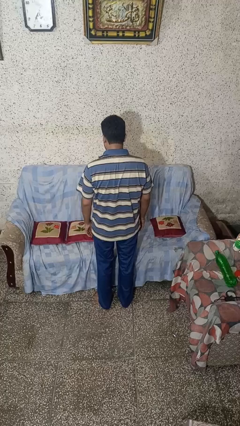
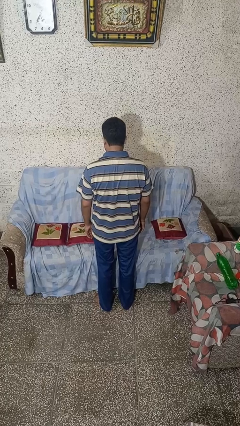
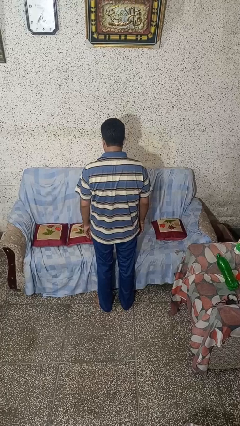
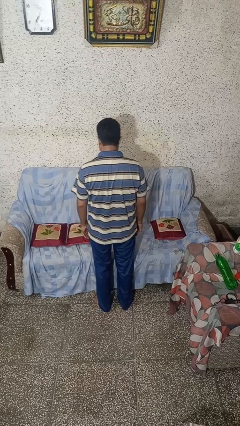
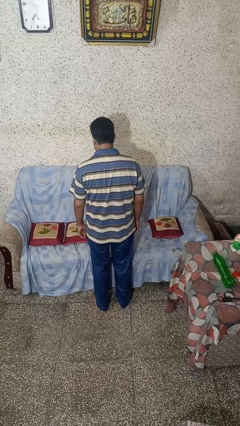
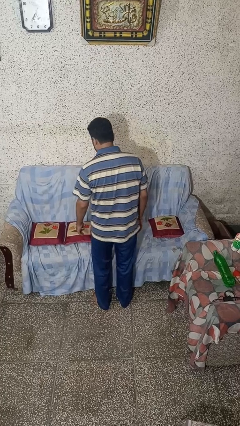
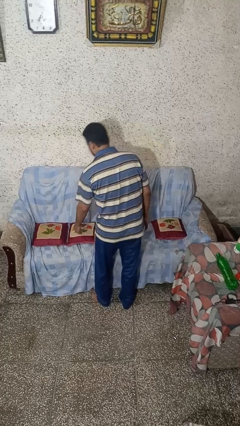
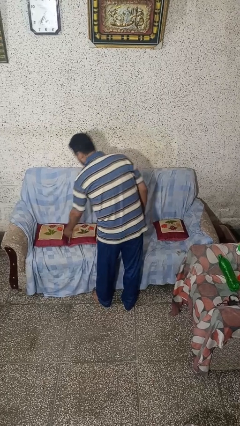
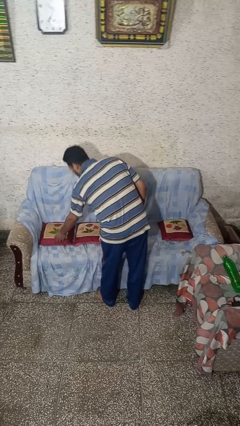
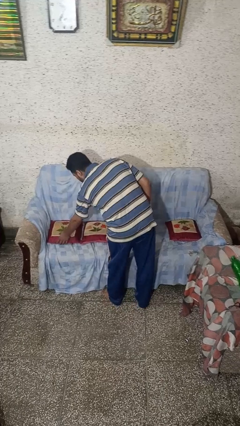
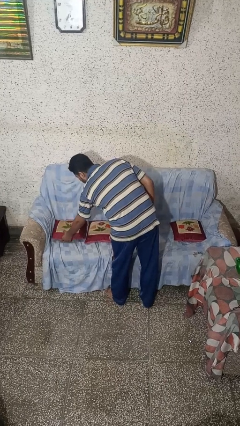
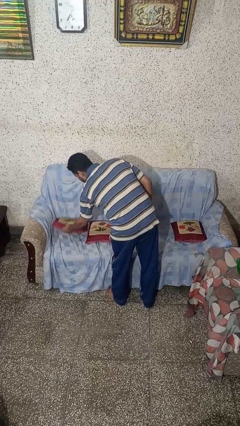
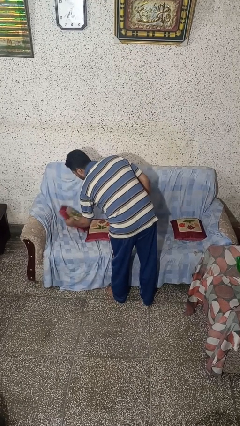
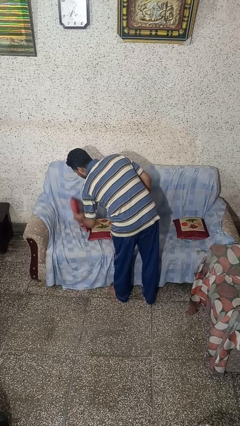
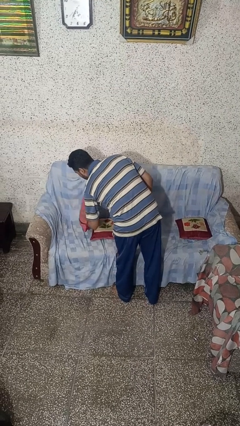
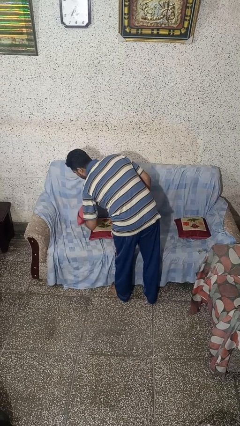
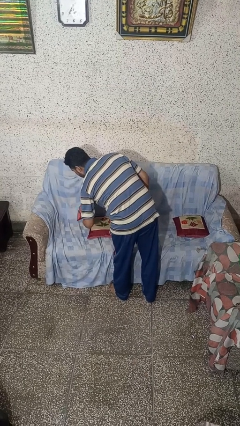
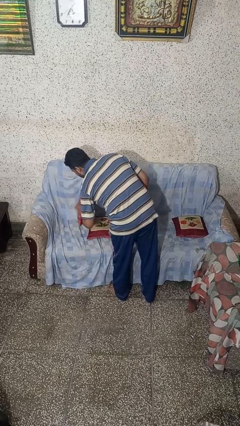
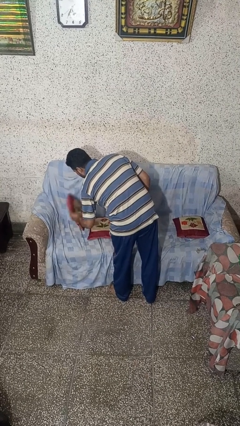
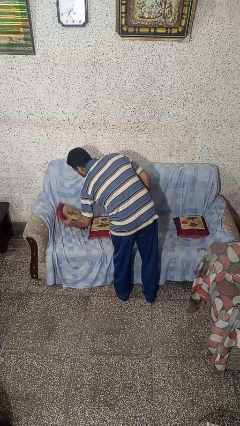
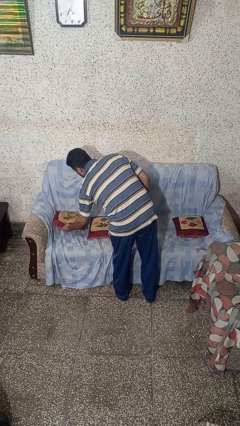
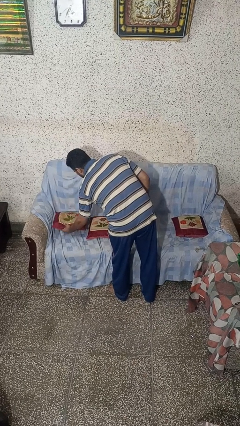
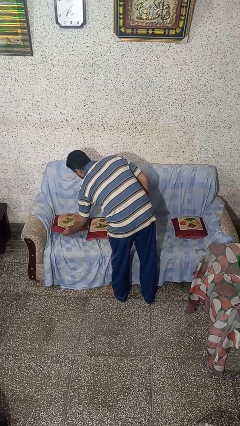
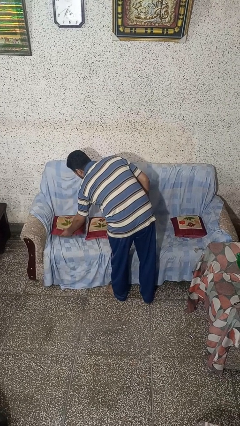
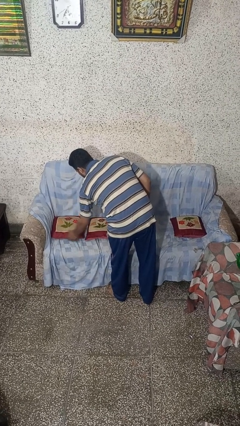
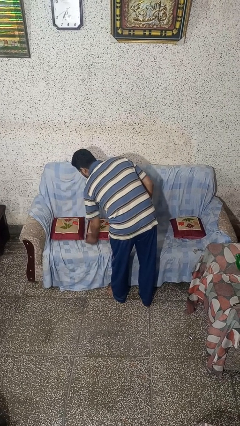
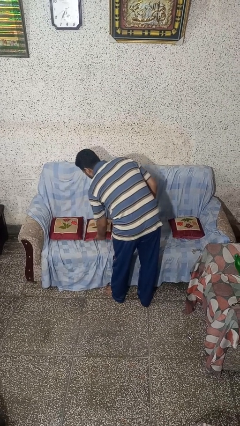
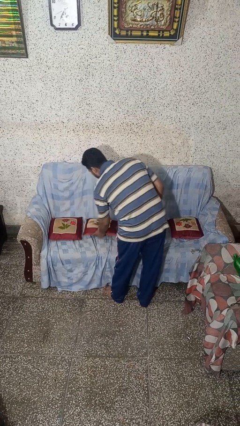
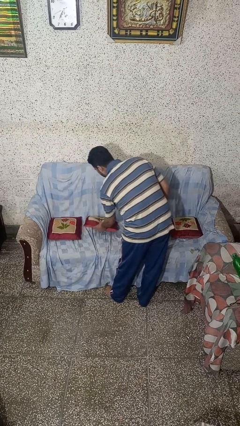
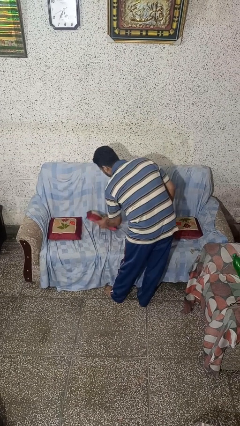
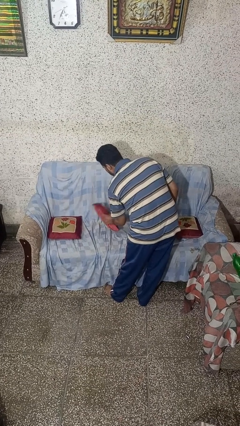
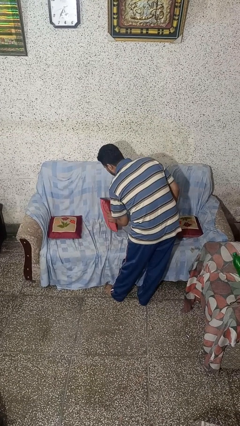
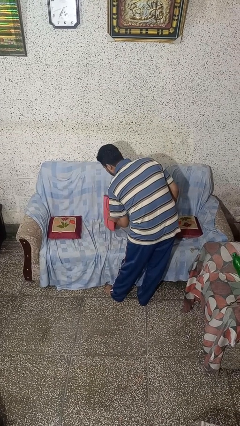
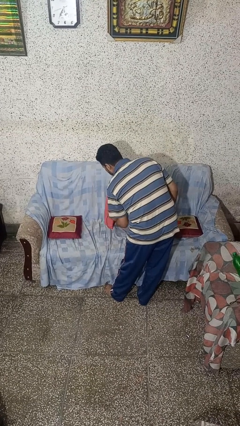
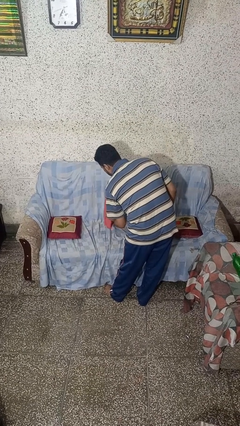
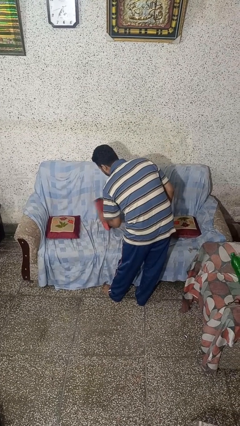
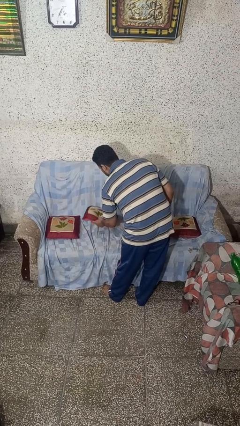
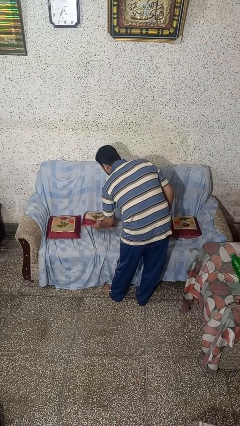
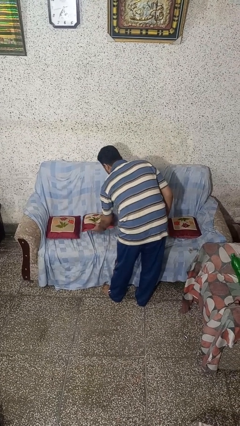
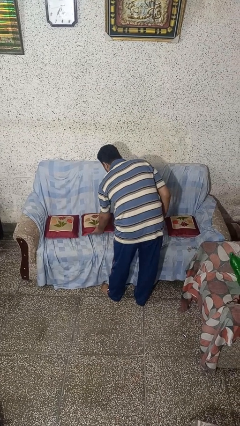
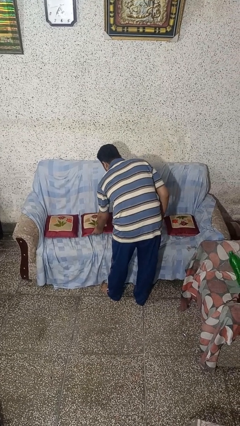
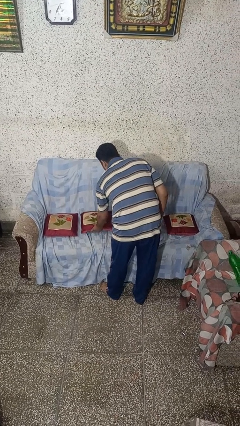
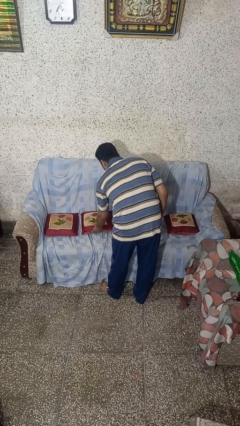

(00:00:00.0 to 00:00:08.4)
person searches in couch

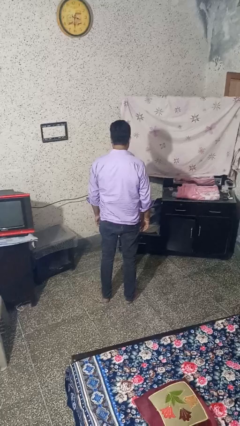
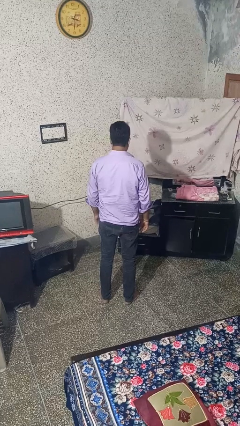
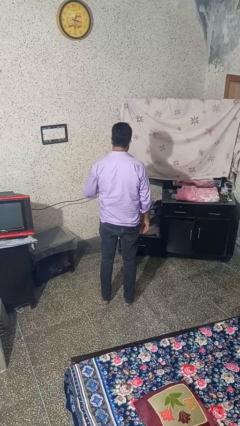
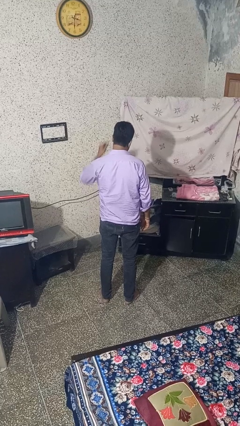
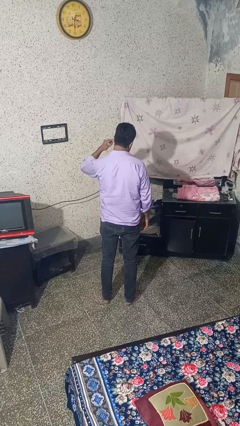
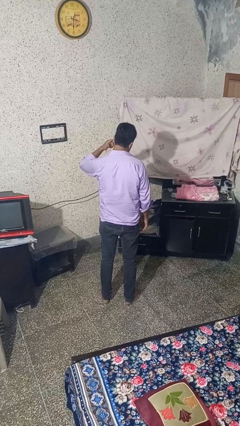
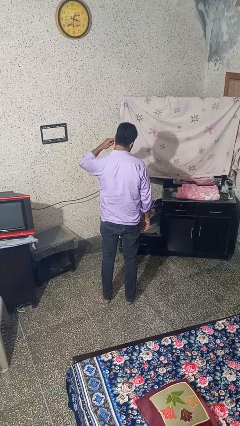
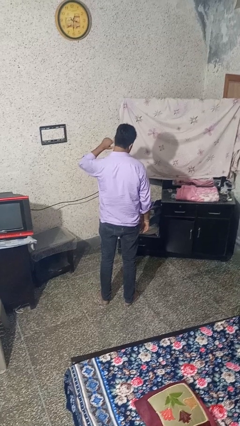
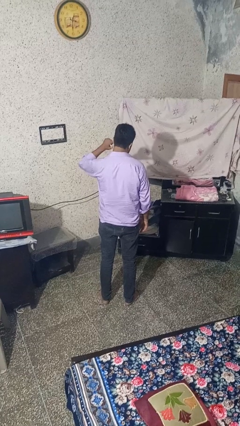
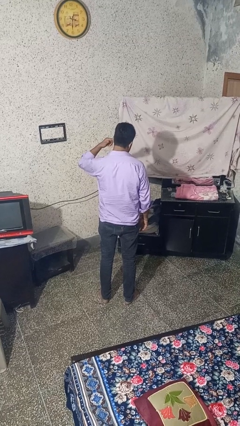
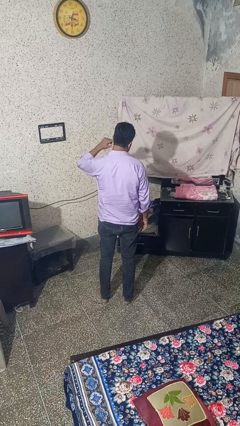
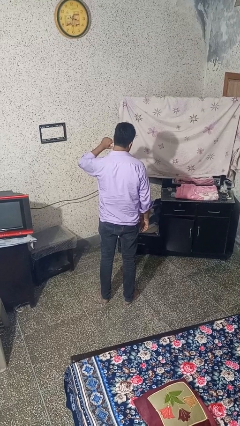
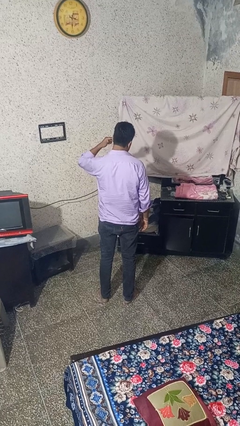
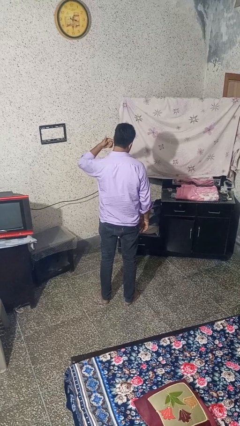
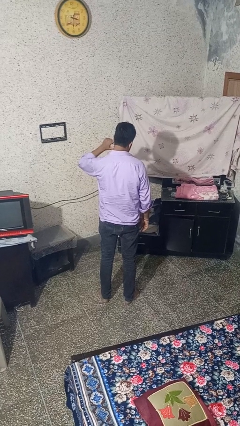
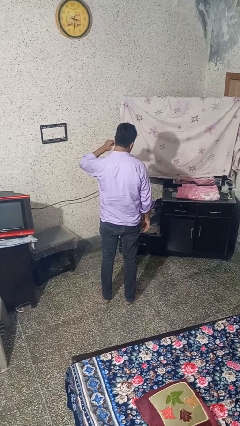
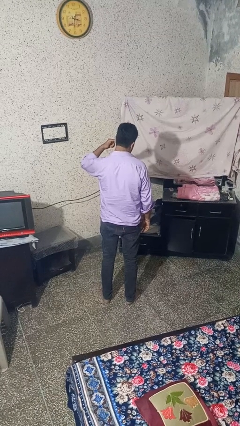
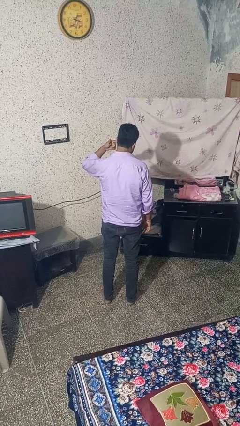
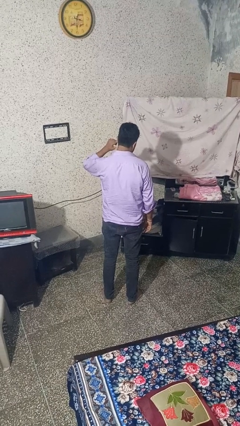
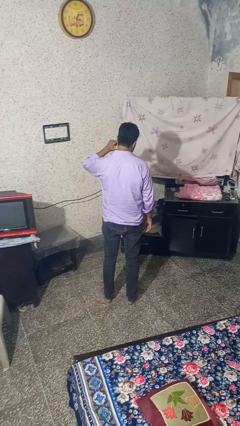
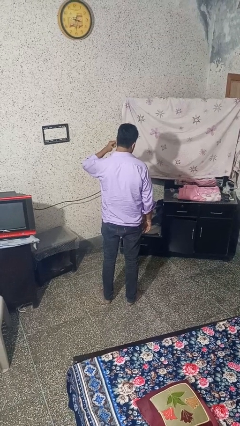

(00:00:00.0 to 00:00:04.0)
person puts fingers in ear

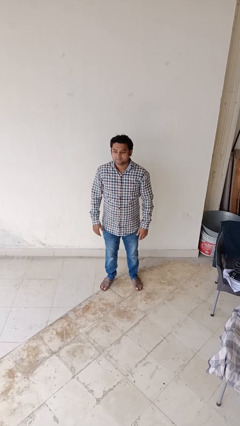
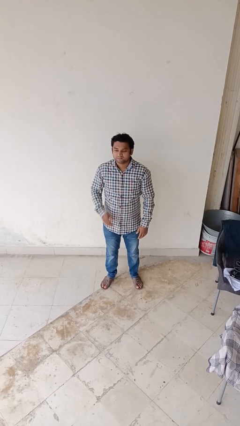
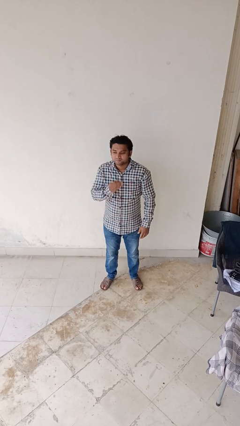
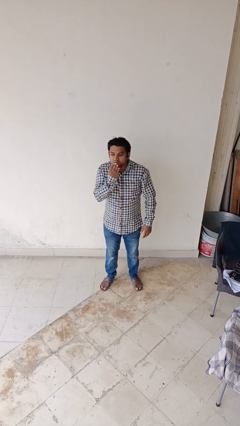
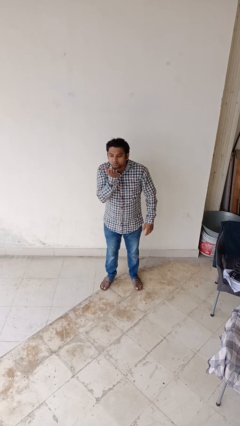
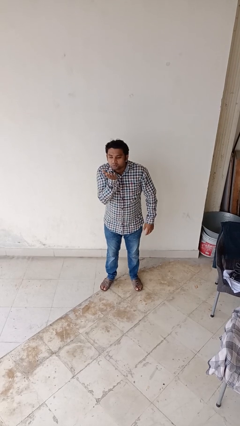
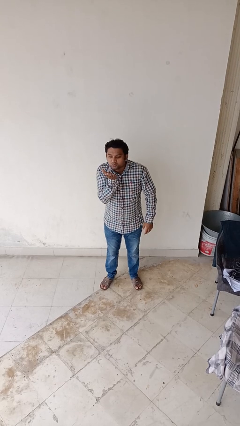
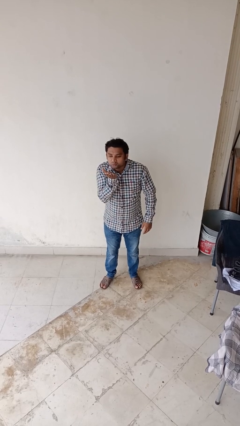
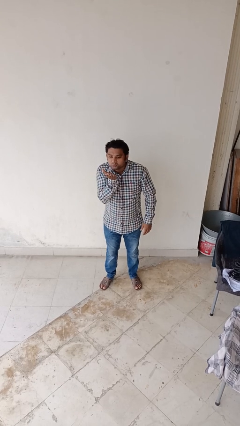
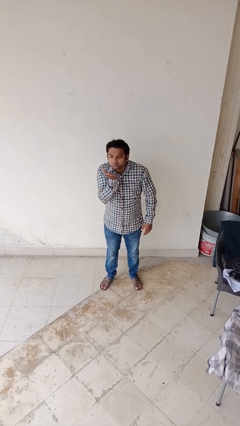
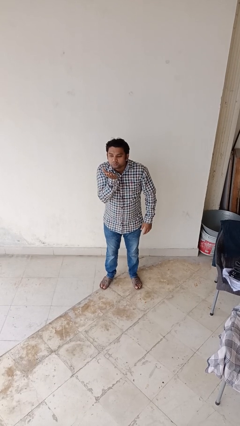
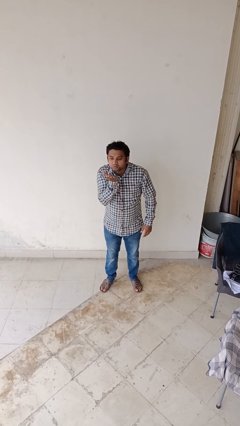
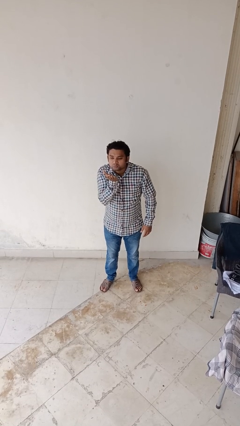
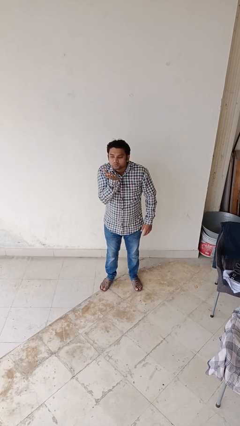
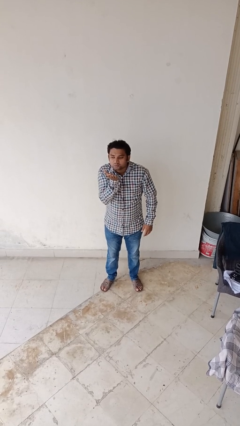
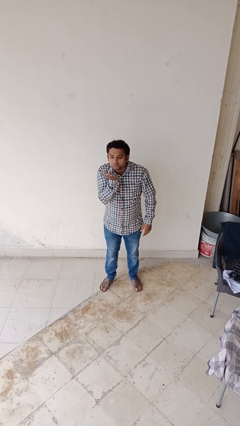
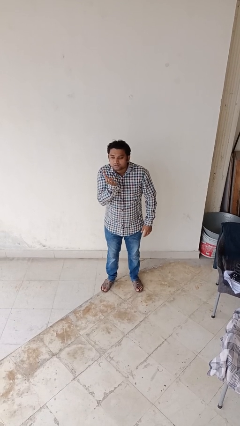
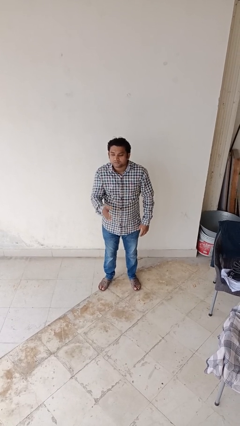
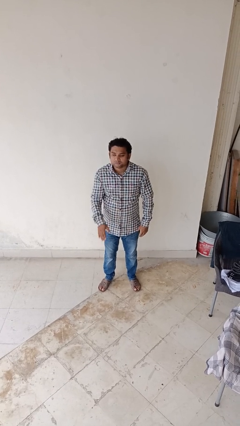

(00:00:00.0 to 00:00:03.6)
person gestures blow kiss

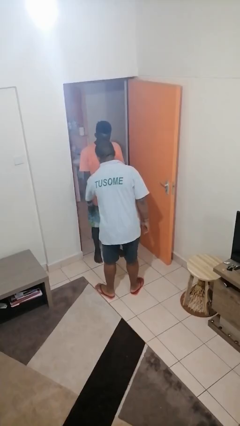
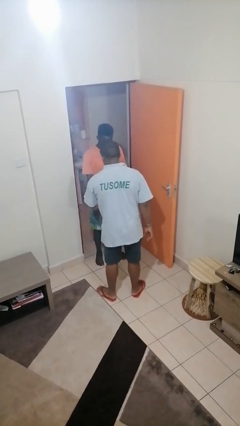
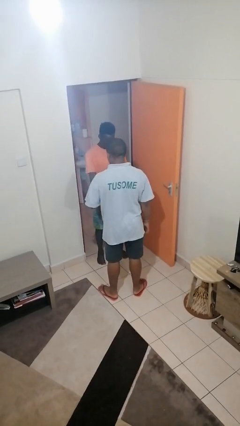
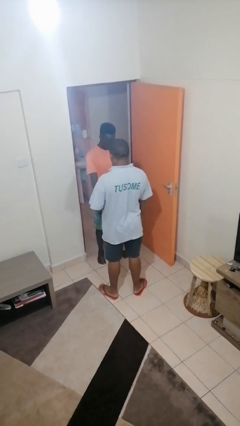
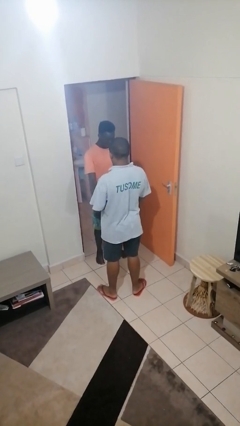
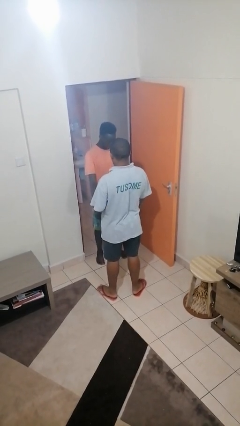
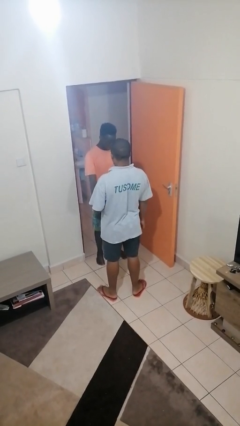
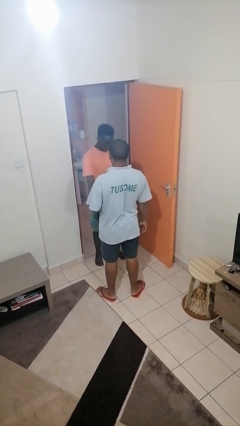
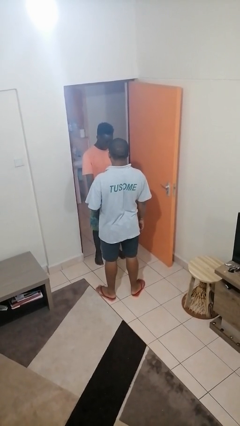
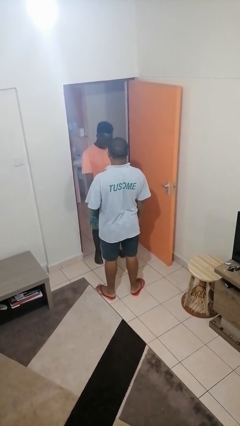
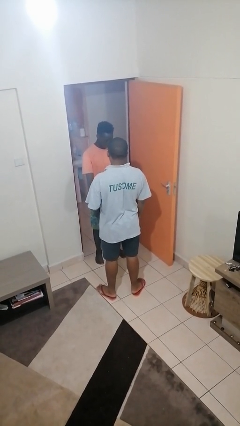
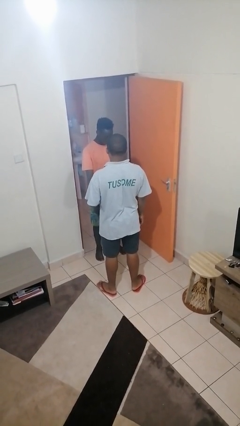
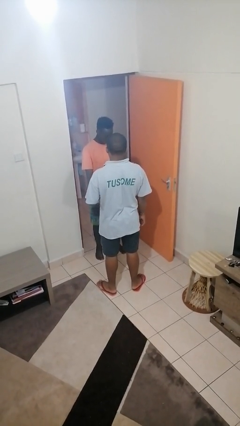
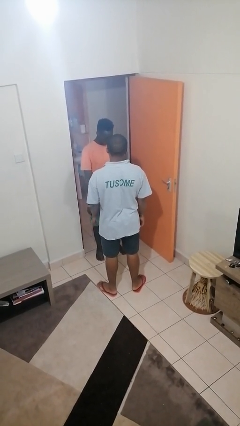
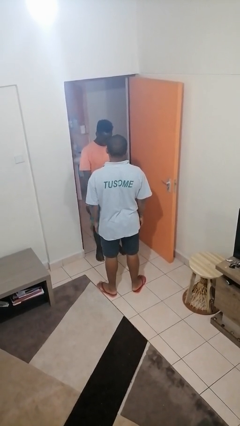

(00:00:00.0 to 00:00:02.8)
person grabs person by forearm
